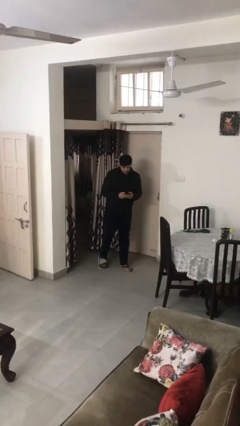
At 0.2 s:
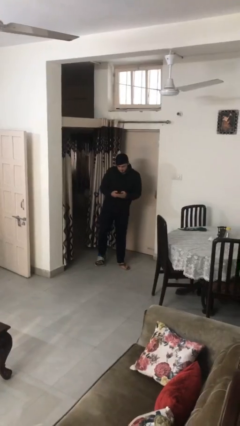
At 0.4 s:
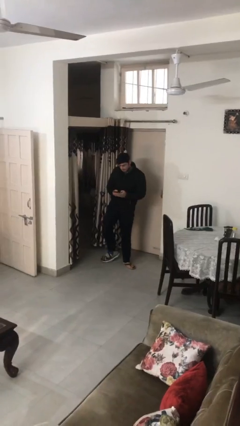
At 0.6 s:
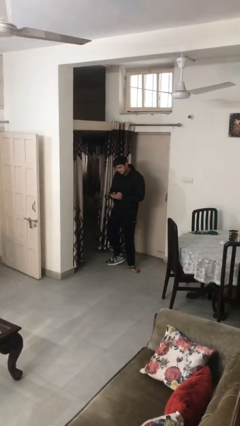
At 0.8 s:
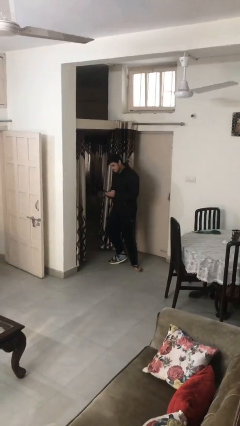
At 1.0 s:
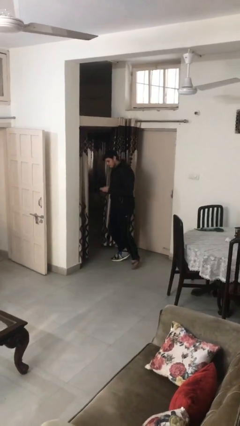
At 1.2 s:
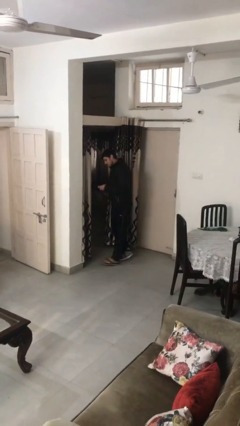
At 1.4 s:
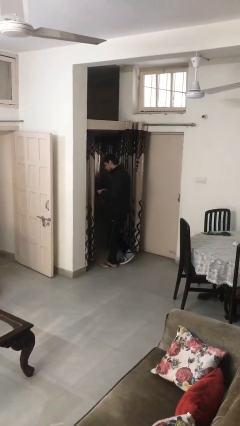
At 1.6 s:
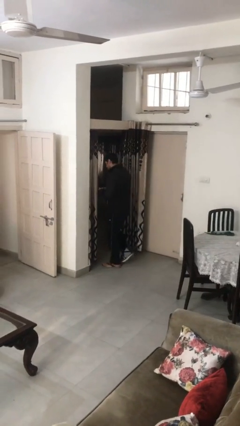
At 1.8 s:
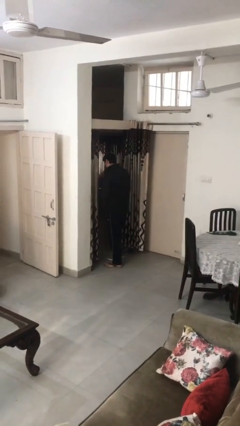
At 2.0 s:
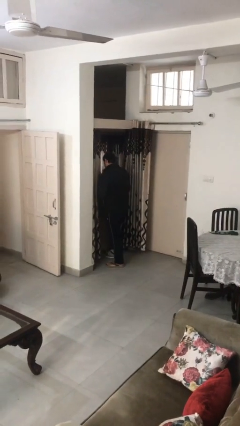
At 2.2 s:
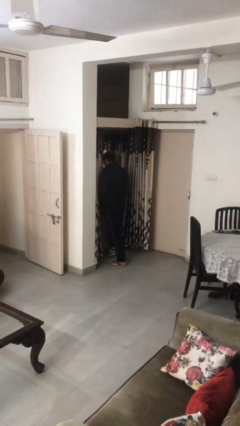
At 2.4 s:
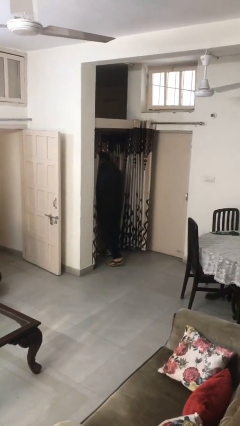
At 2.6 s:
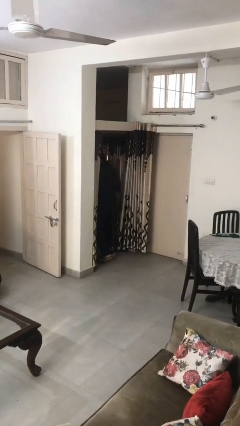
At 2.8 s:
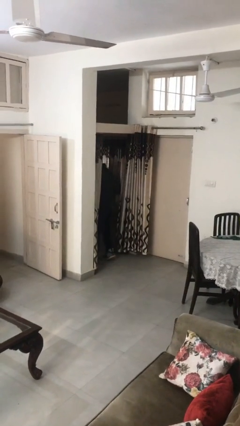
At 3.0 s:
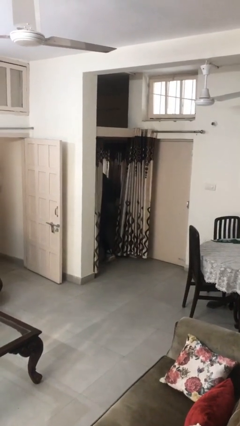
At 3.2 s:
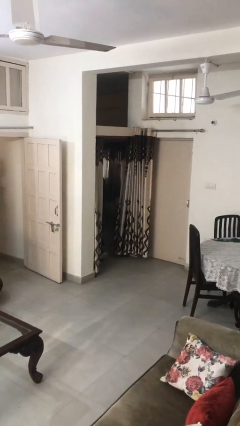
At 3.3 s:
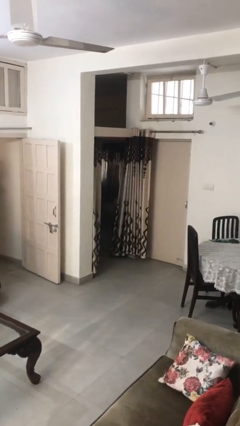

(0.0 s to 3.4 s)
person exits scene through structure

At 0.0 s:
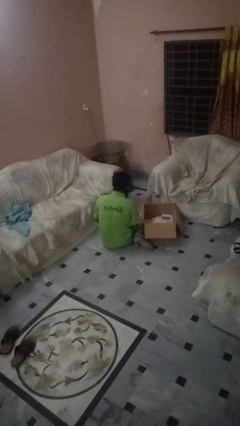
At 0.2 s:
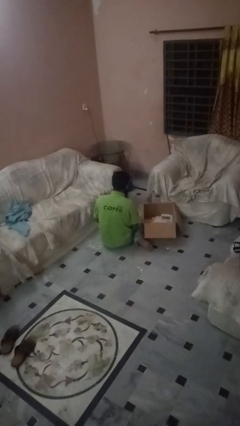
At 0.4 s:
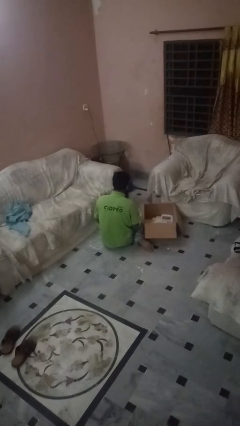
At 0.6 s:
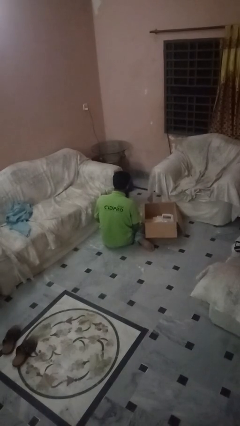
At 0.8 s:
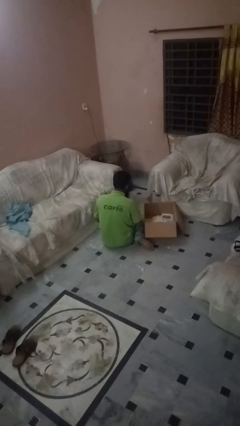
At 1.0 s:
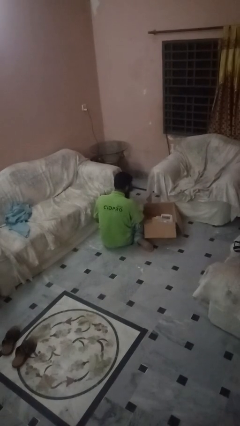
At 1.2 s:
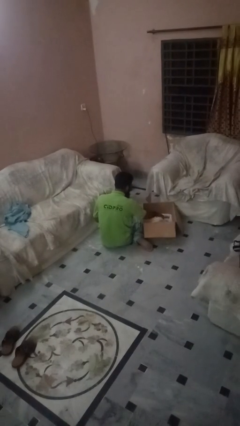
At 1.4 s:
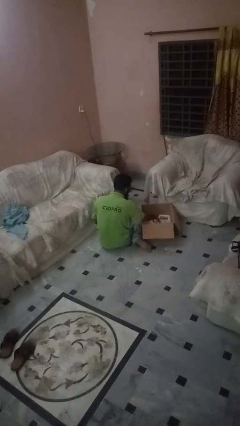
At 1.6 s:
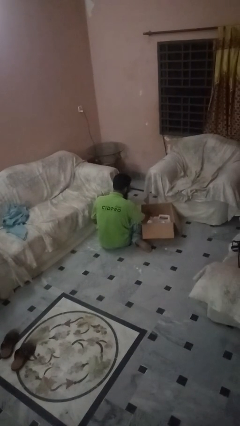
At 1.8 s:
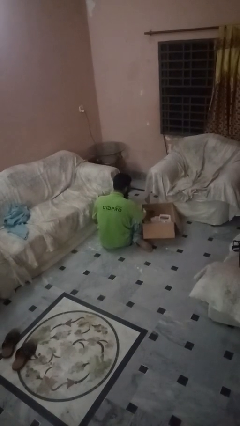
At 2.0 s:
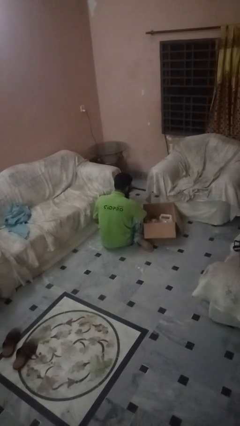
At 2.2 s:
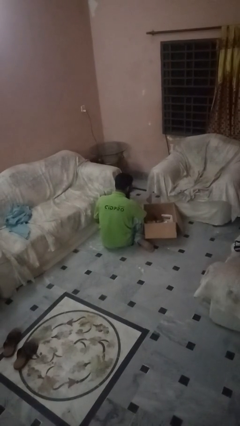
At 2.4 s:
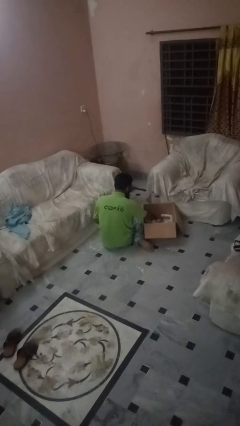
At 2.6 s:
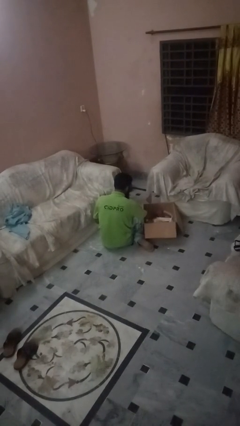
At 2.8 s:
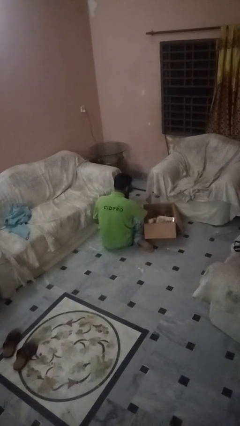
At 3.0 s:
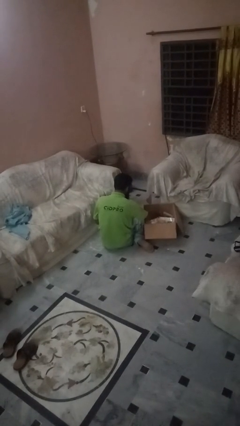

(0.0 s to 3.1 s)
person searches in box

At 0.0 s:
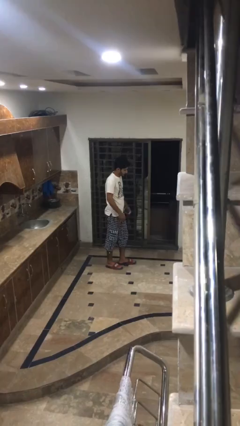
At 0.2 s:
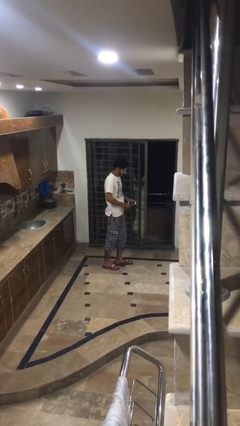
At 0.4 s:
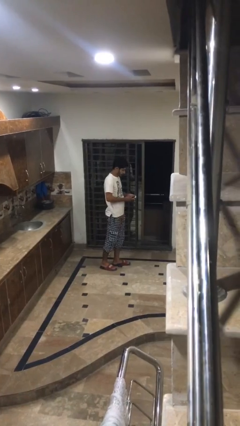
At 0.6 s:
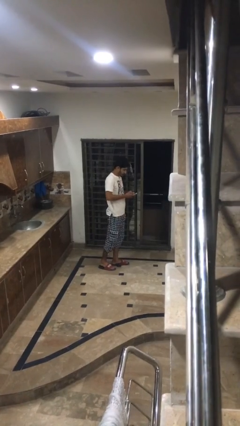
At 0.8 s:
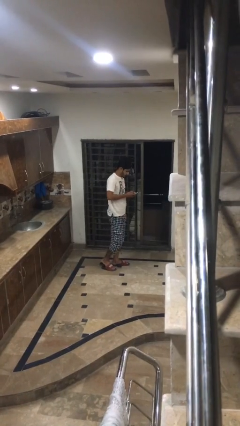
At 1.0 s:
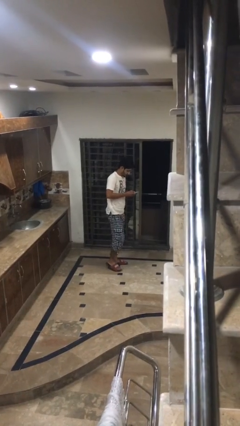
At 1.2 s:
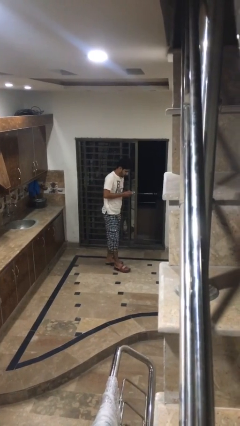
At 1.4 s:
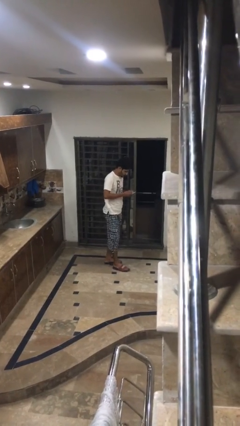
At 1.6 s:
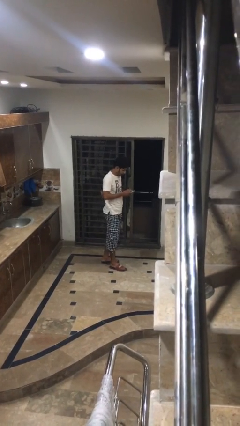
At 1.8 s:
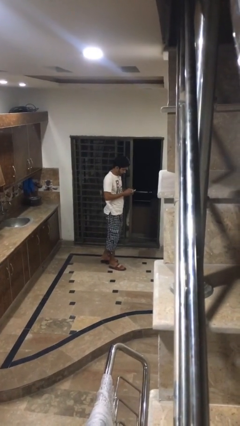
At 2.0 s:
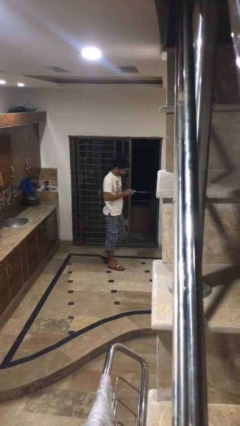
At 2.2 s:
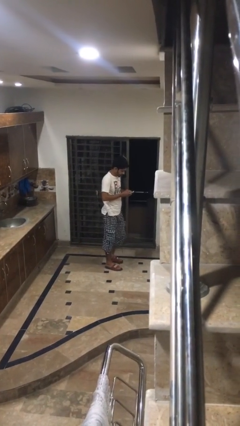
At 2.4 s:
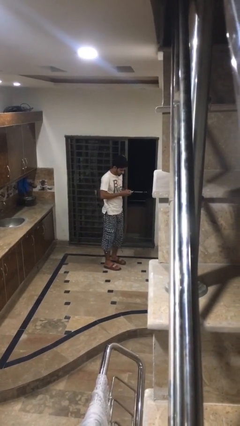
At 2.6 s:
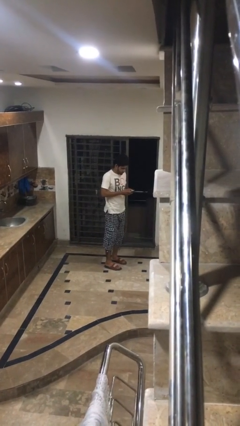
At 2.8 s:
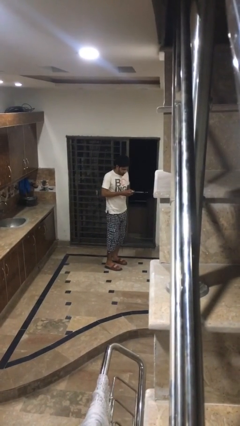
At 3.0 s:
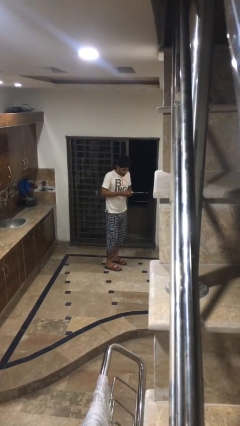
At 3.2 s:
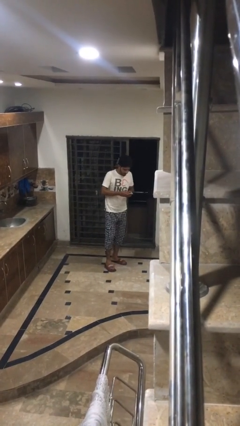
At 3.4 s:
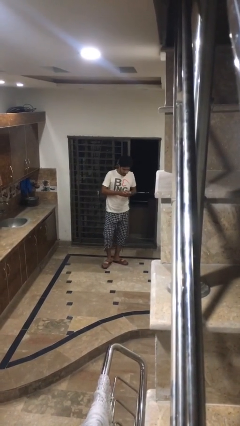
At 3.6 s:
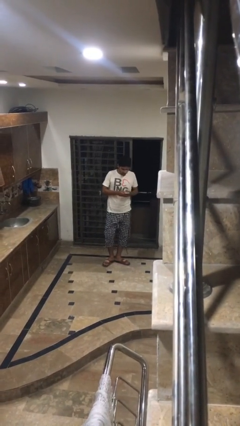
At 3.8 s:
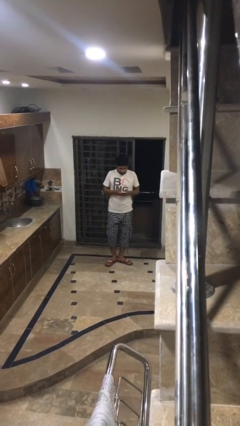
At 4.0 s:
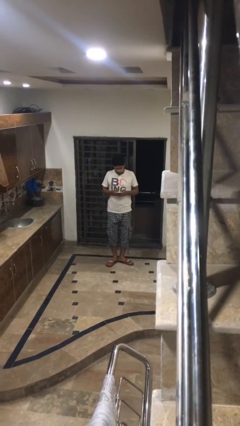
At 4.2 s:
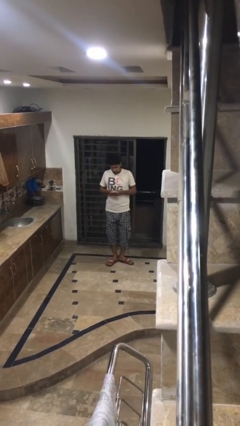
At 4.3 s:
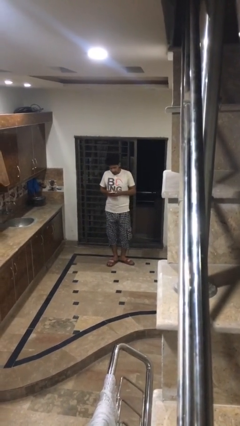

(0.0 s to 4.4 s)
person texts on phone

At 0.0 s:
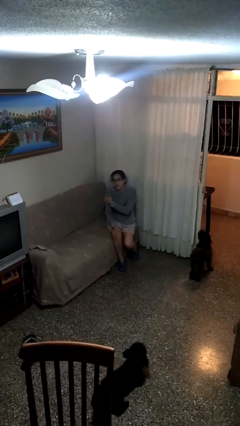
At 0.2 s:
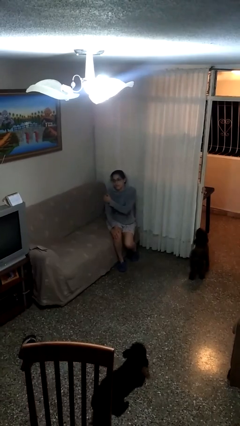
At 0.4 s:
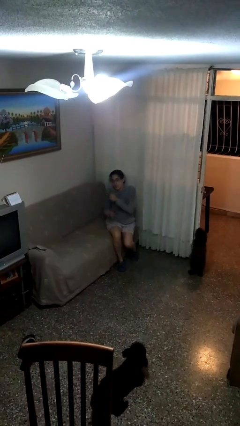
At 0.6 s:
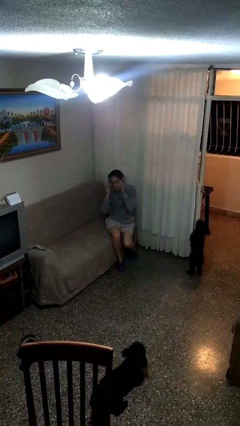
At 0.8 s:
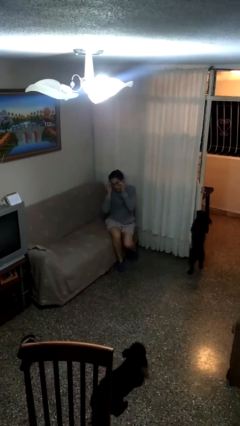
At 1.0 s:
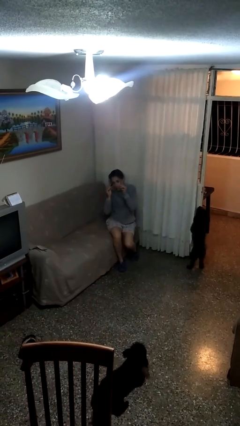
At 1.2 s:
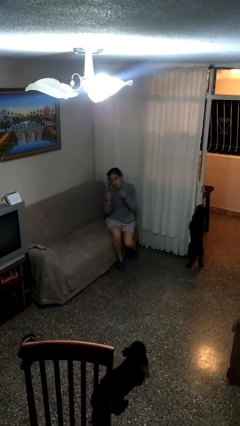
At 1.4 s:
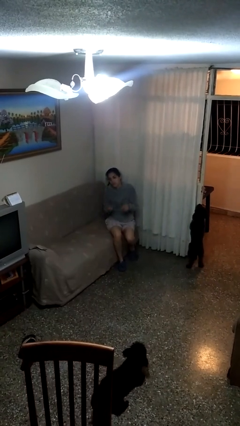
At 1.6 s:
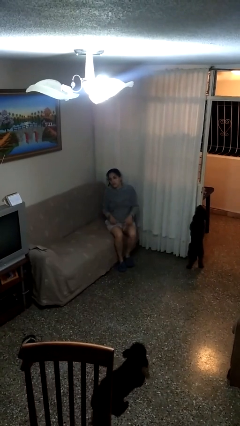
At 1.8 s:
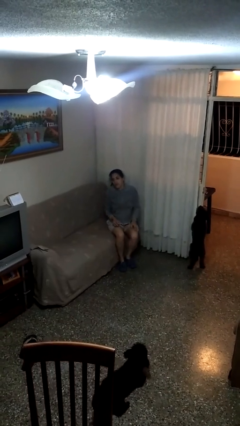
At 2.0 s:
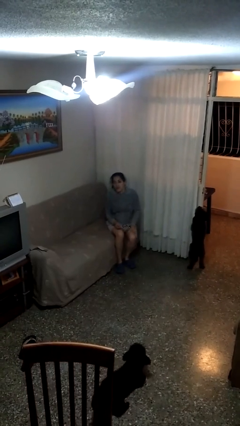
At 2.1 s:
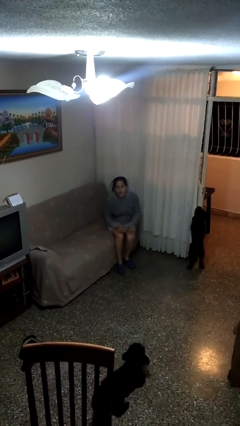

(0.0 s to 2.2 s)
person takes off glasses

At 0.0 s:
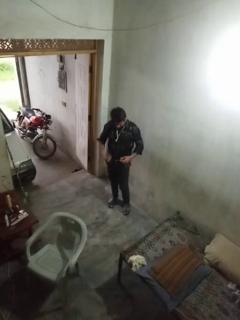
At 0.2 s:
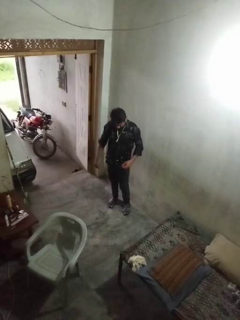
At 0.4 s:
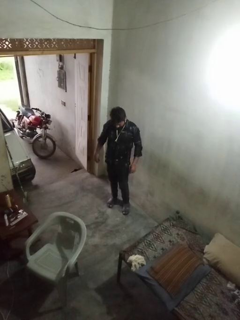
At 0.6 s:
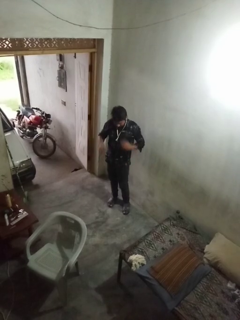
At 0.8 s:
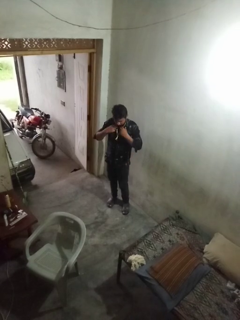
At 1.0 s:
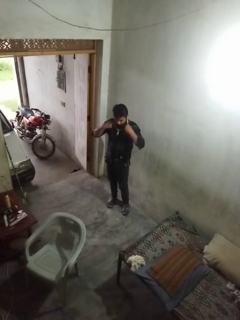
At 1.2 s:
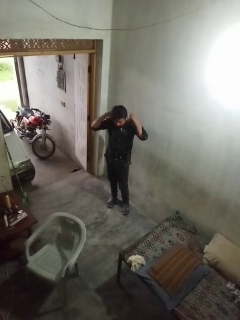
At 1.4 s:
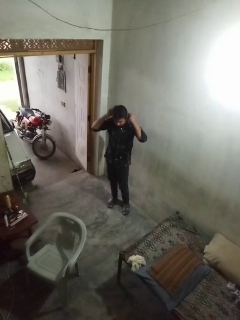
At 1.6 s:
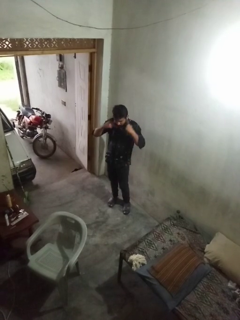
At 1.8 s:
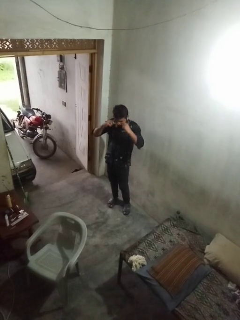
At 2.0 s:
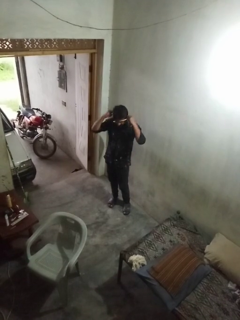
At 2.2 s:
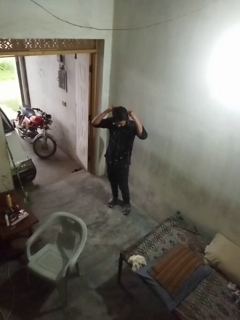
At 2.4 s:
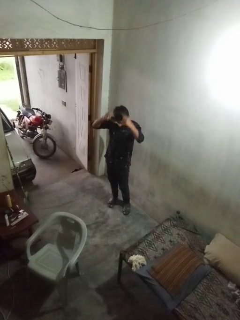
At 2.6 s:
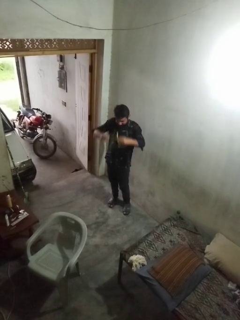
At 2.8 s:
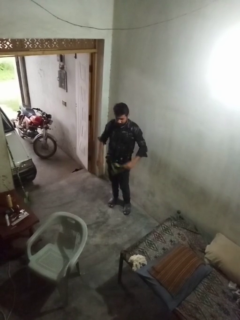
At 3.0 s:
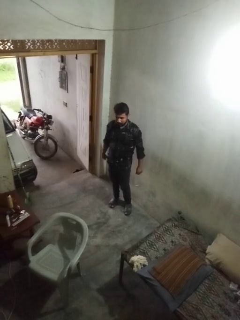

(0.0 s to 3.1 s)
person takes off necklace

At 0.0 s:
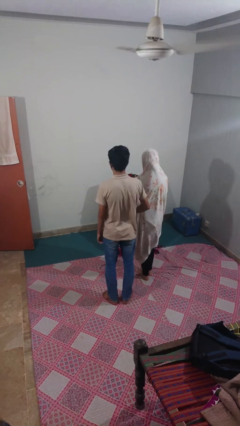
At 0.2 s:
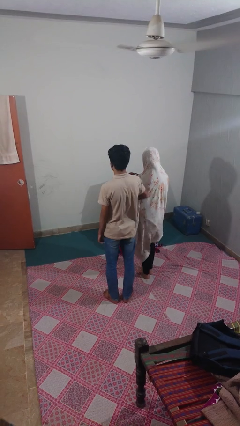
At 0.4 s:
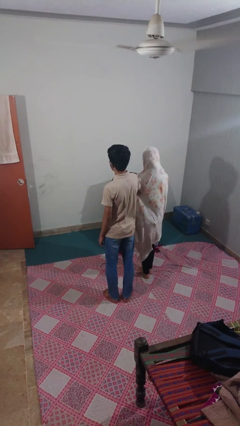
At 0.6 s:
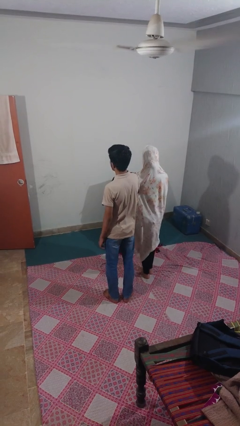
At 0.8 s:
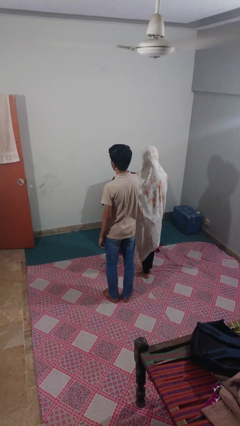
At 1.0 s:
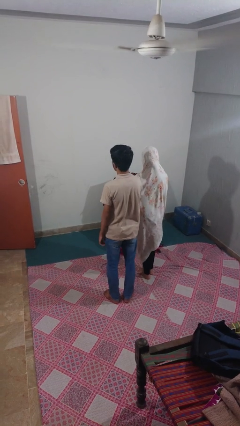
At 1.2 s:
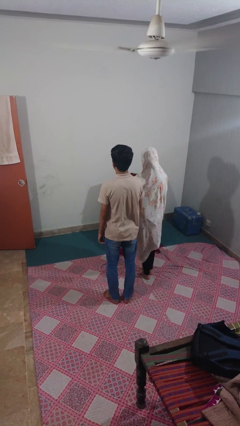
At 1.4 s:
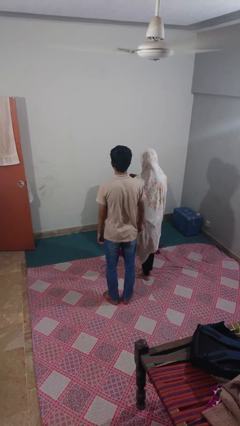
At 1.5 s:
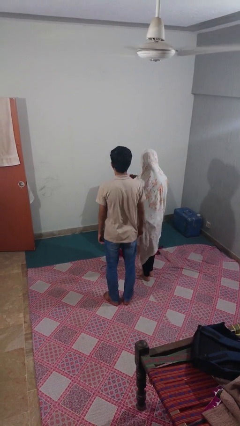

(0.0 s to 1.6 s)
person nudges person with elbow

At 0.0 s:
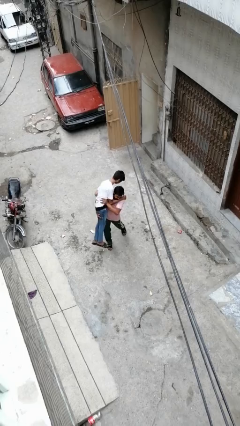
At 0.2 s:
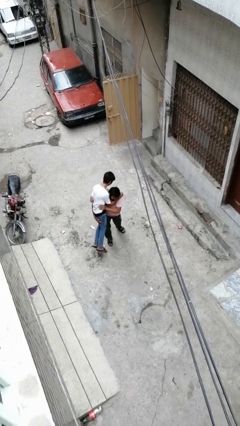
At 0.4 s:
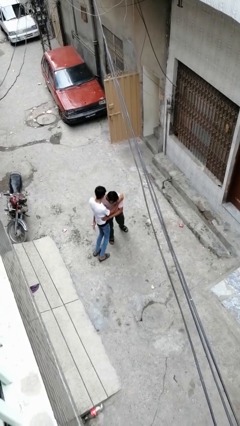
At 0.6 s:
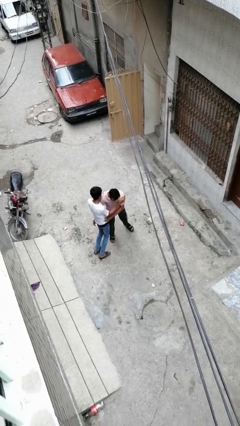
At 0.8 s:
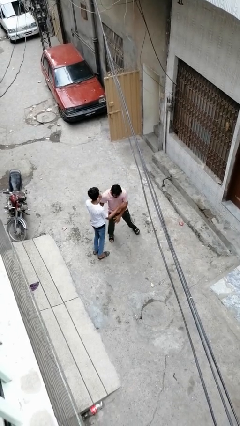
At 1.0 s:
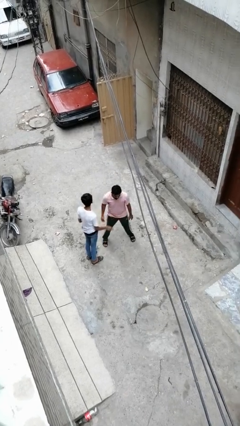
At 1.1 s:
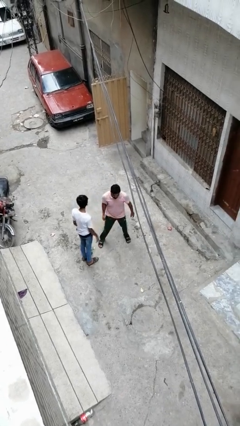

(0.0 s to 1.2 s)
person puts down person
